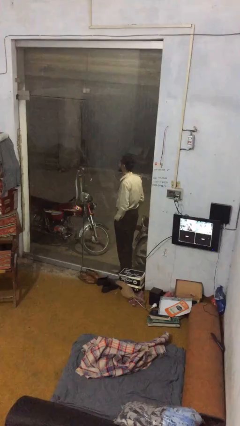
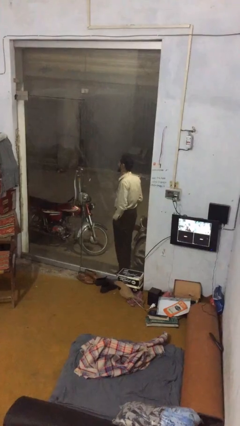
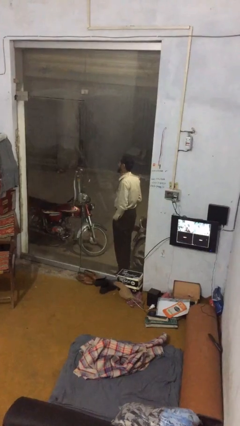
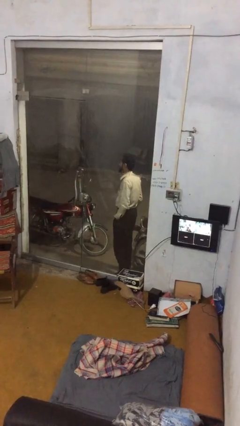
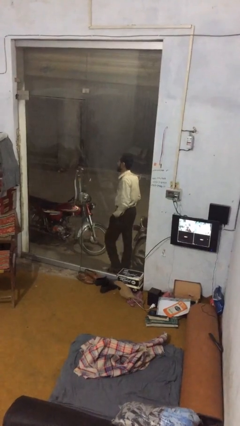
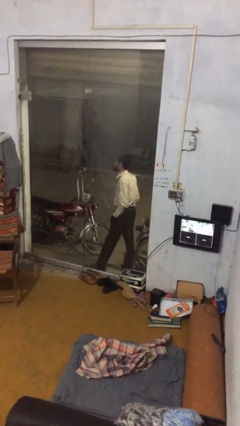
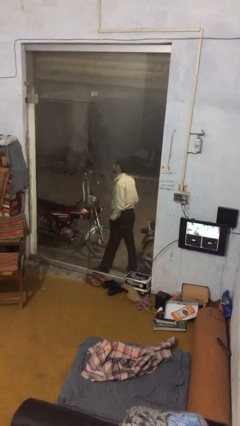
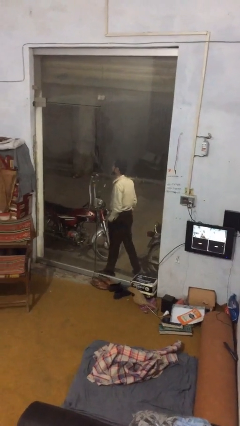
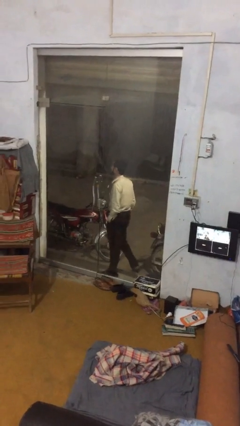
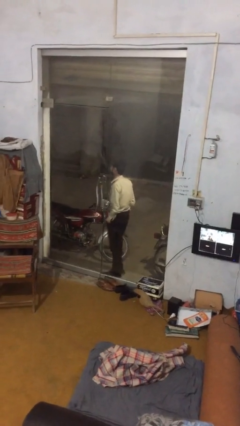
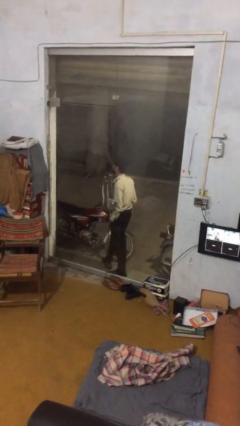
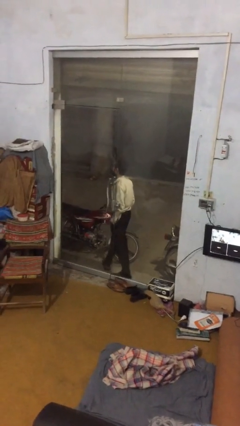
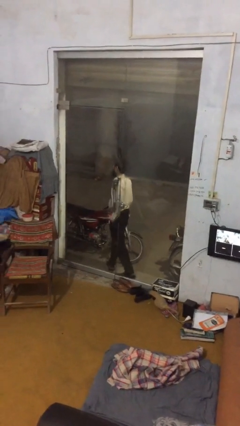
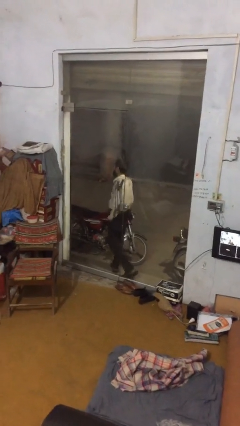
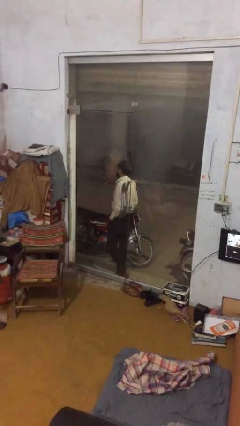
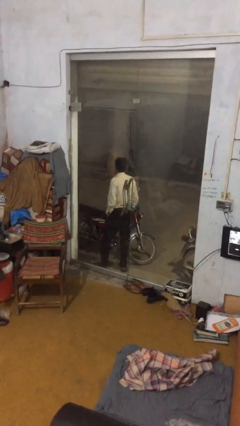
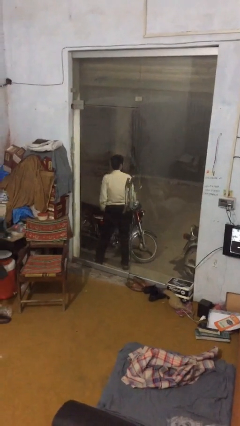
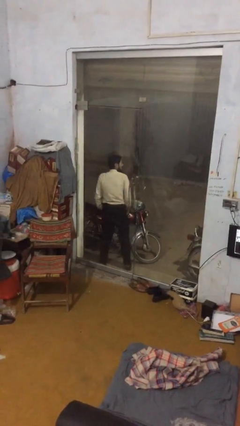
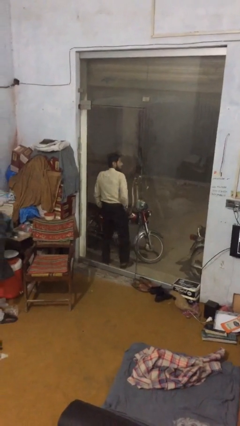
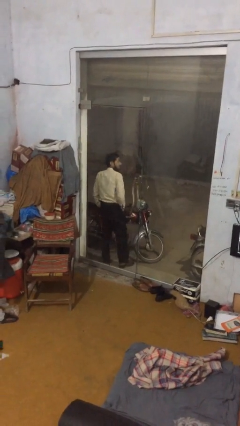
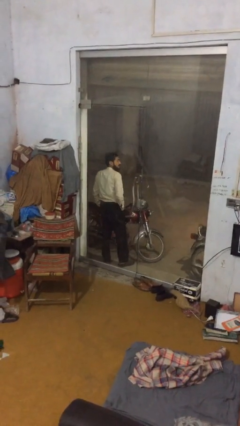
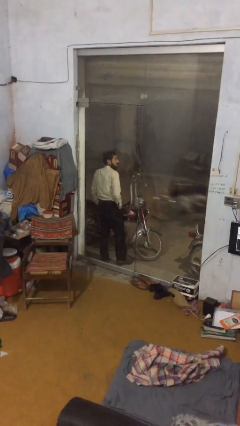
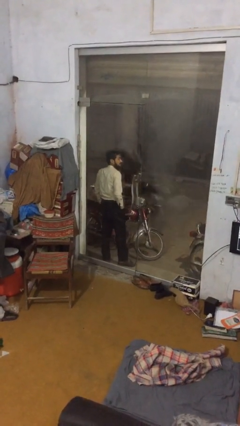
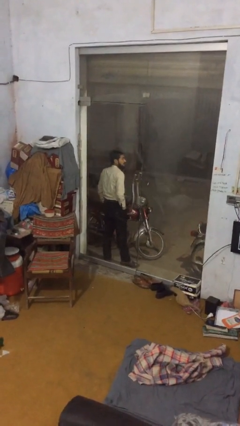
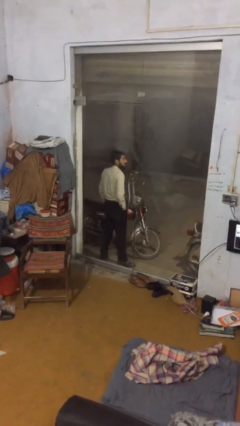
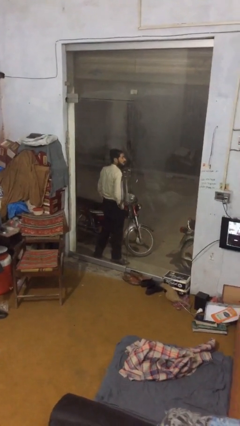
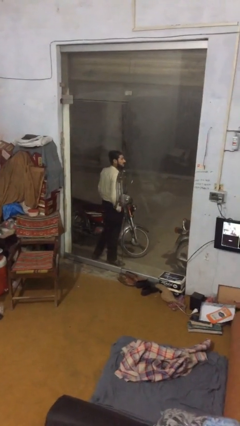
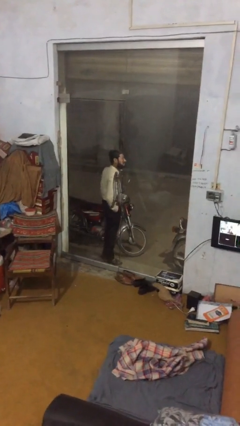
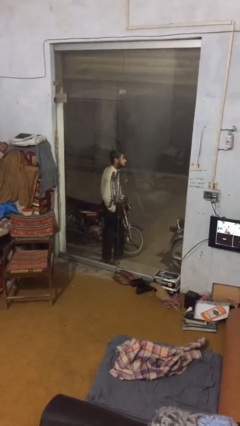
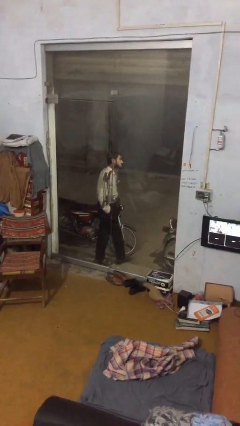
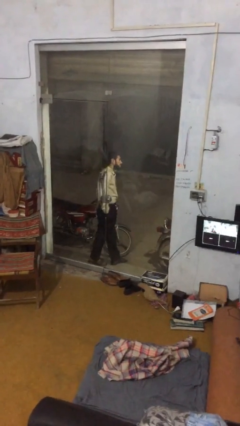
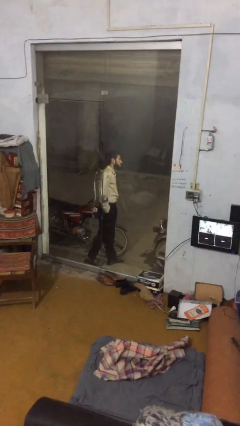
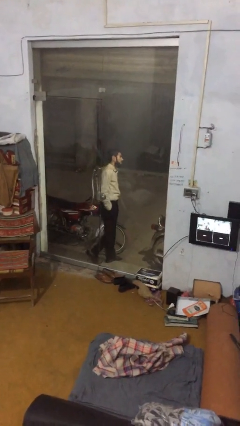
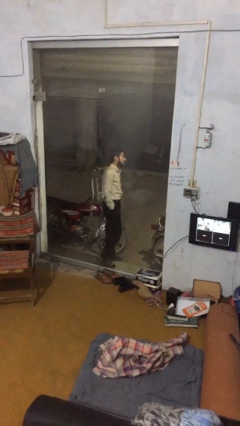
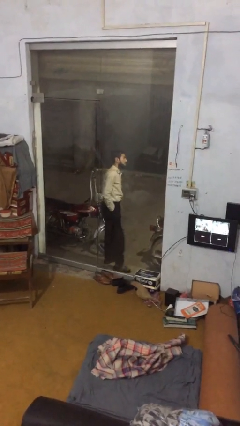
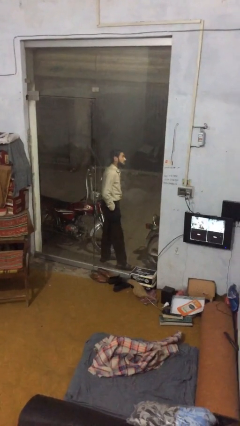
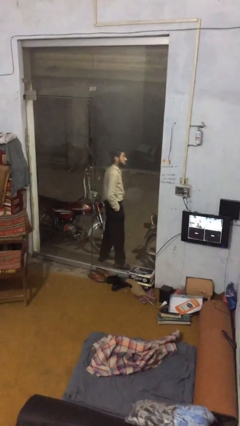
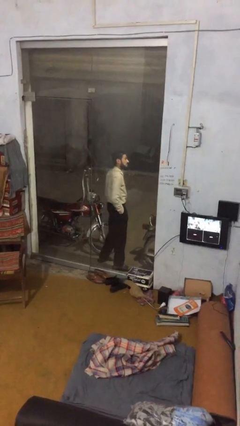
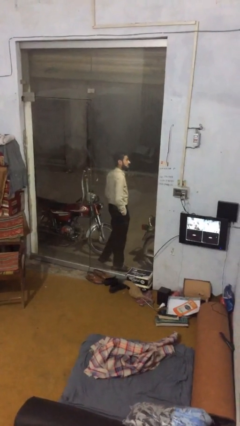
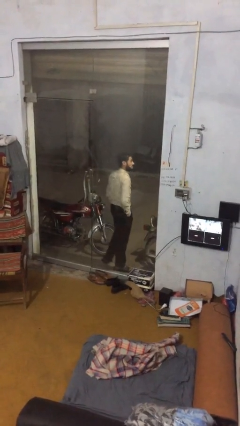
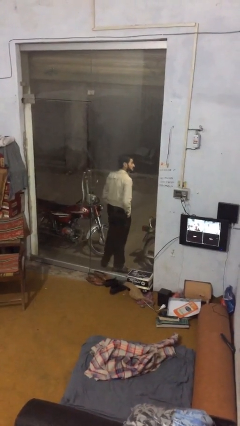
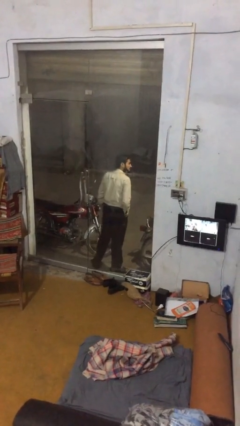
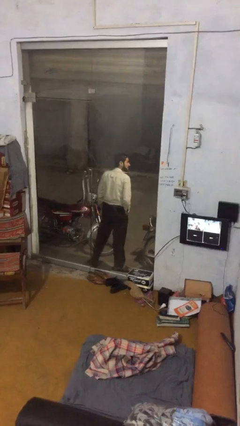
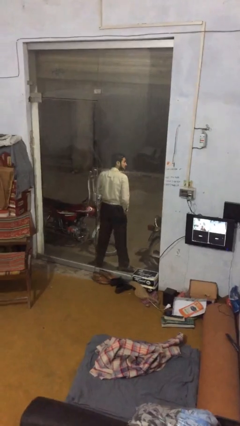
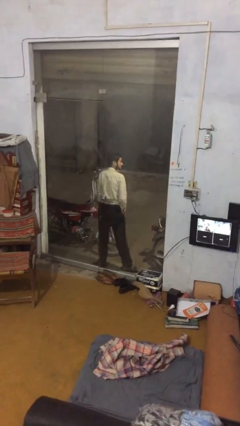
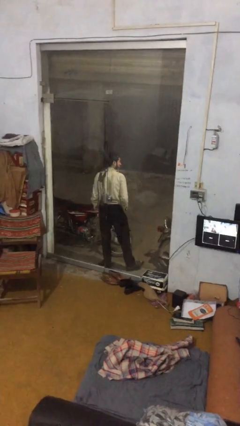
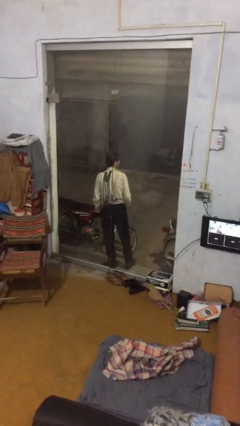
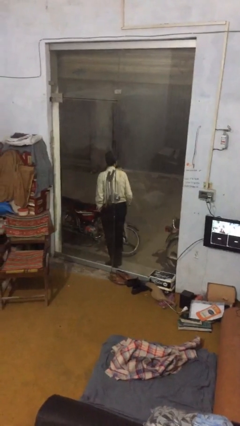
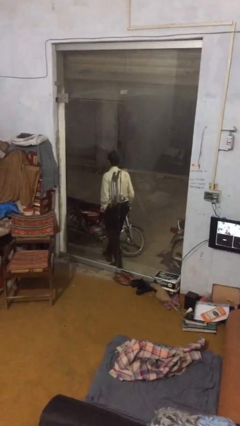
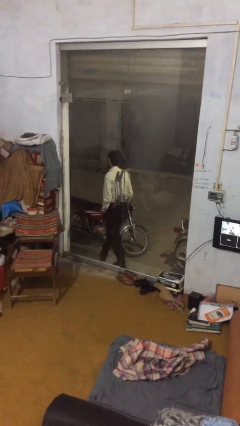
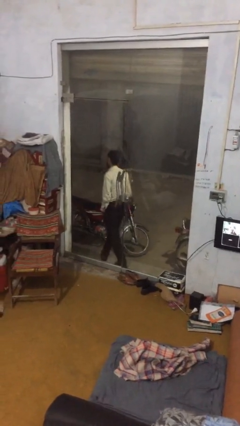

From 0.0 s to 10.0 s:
person walks

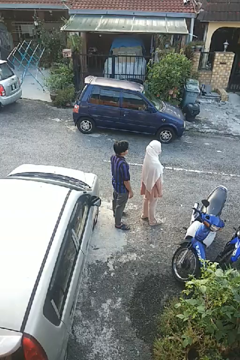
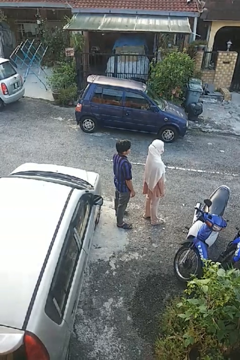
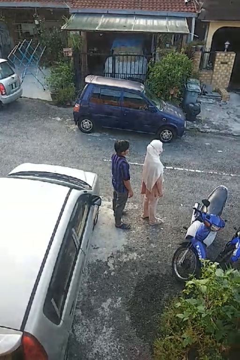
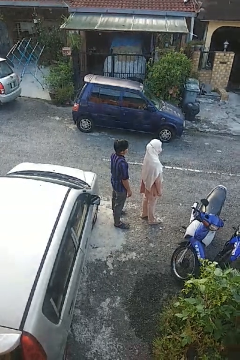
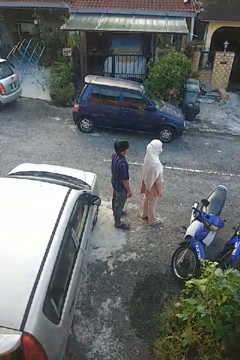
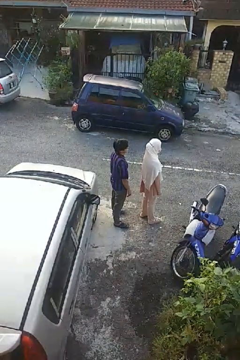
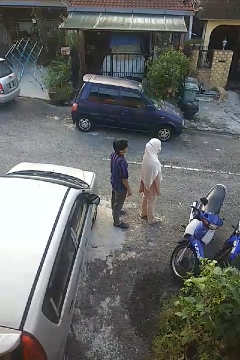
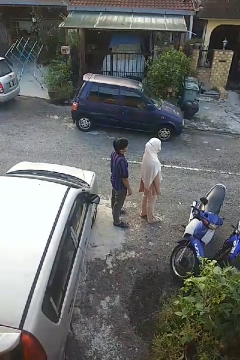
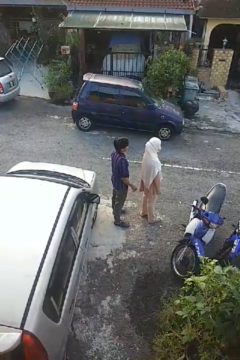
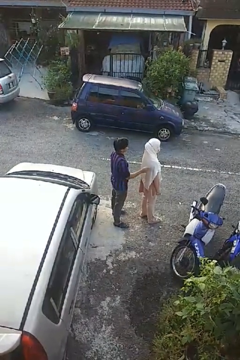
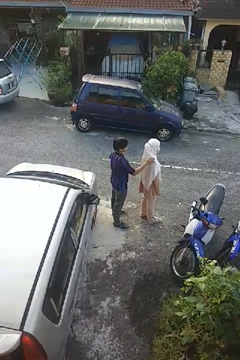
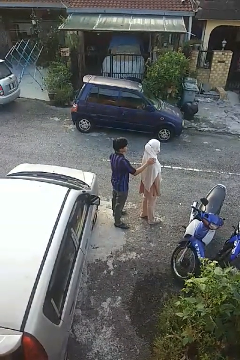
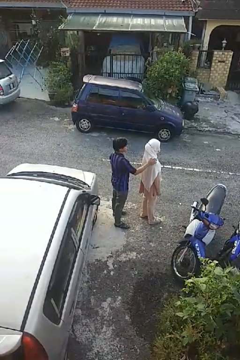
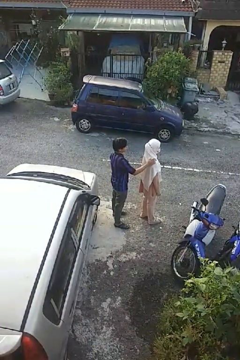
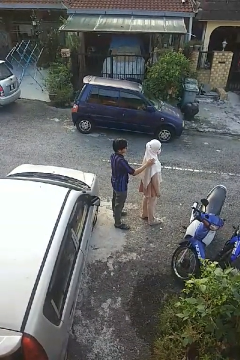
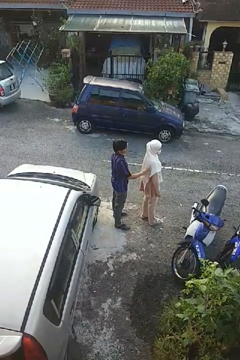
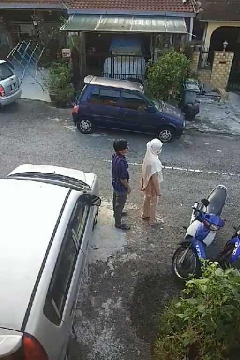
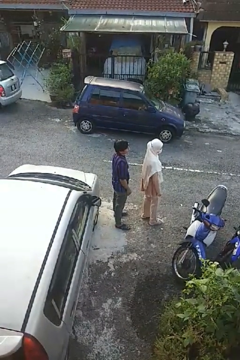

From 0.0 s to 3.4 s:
person touches back of person

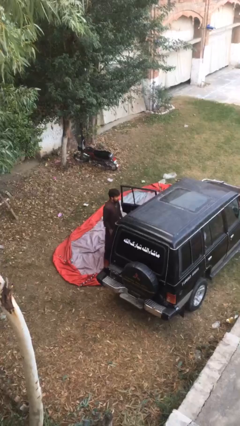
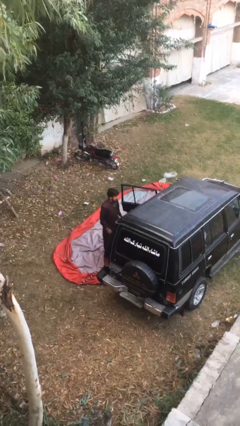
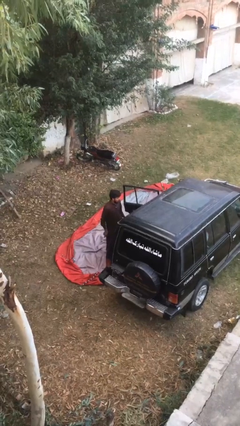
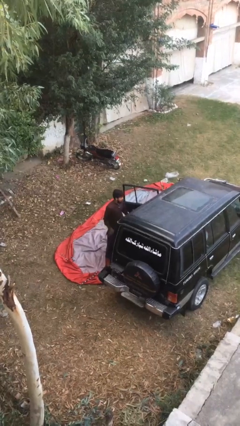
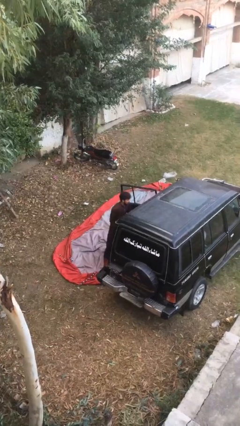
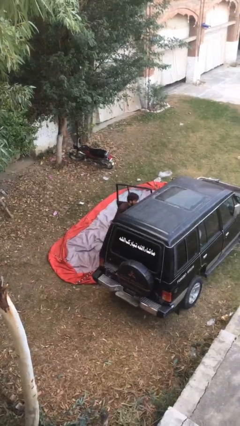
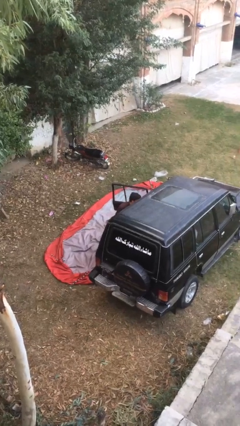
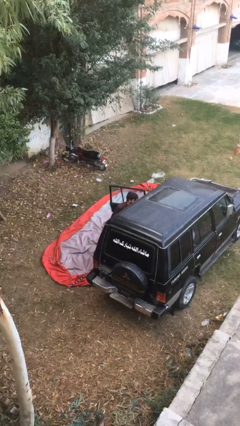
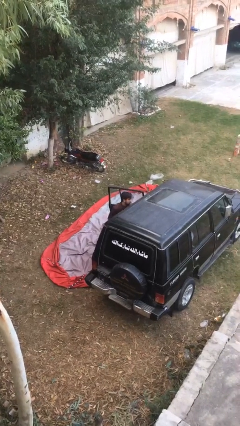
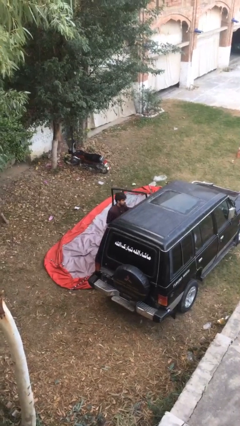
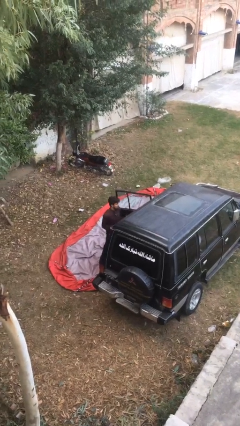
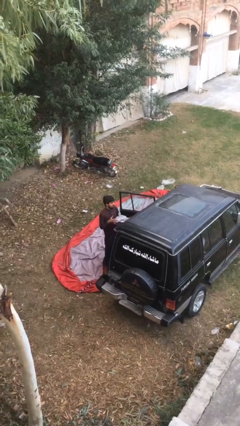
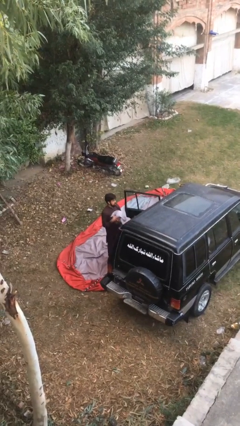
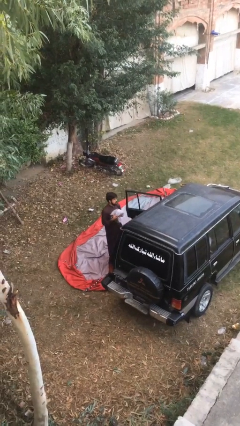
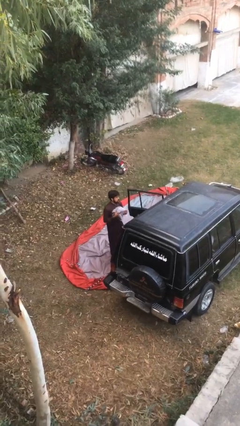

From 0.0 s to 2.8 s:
person unloads car

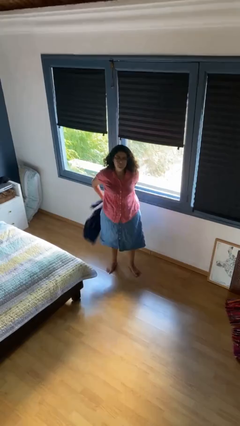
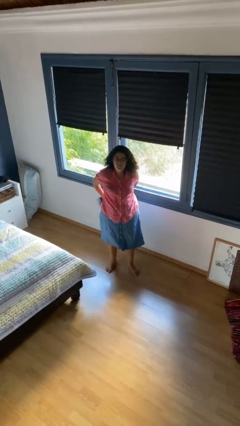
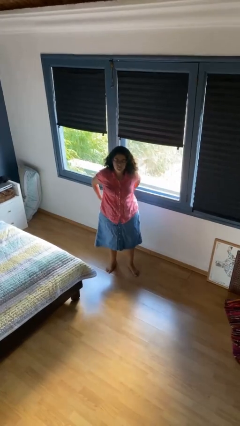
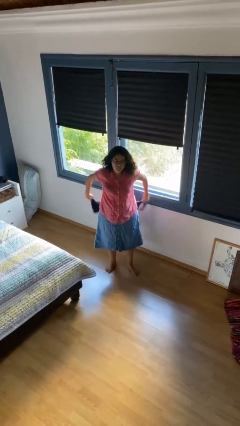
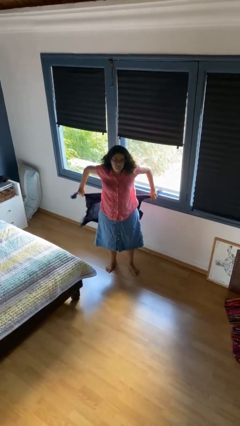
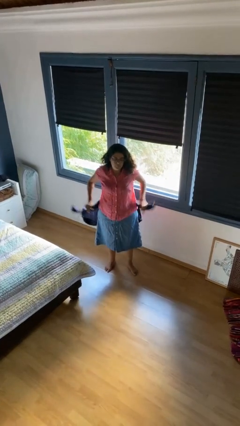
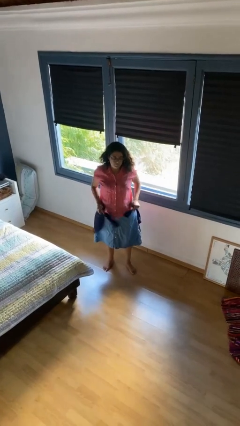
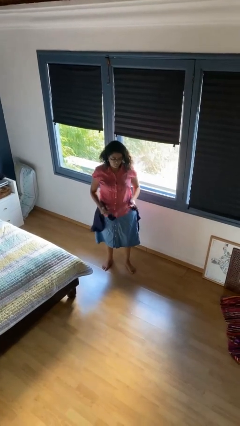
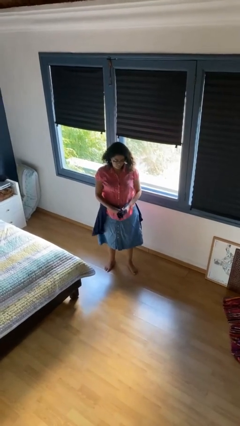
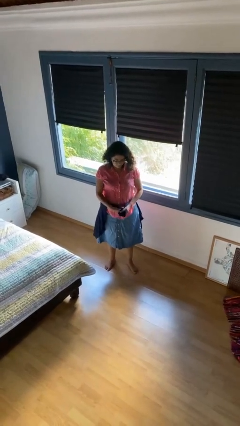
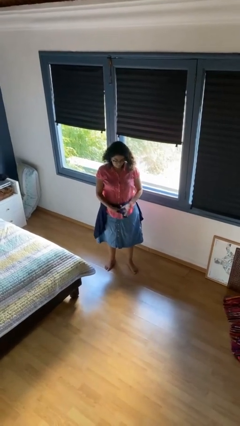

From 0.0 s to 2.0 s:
person ties jacket around waist
